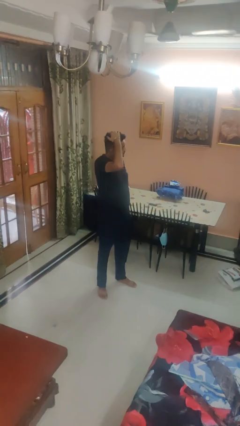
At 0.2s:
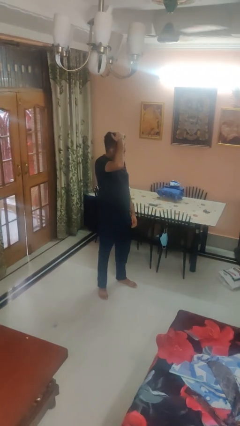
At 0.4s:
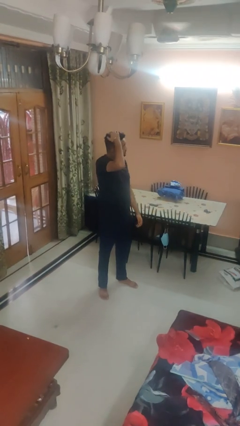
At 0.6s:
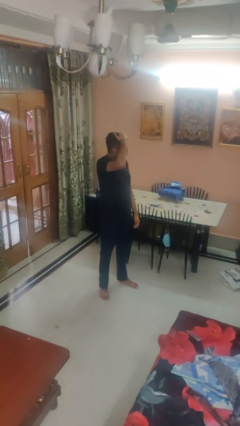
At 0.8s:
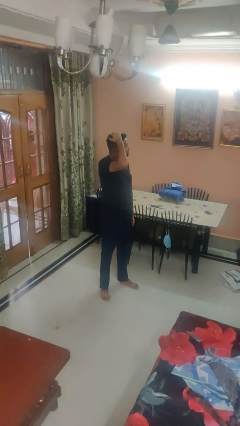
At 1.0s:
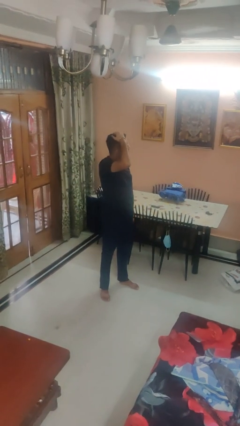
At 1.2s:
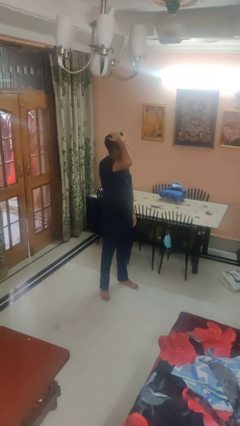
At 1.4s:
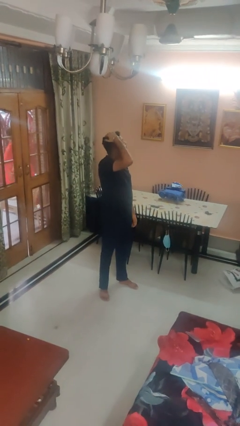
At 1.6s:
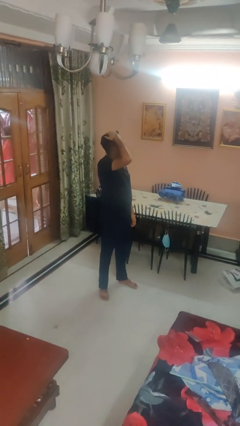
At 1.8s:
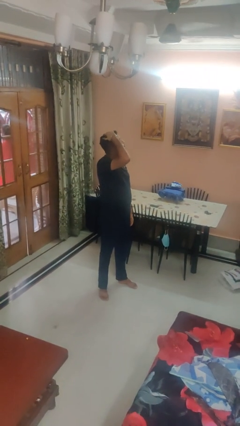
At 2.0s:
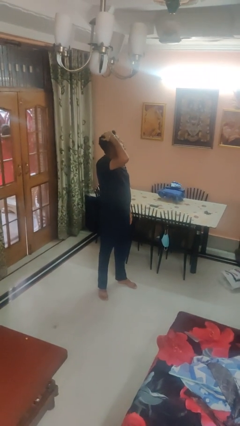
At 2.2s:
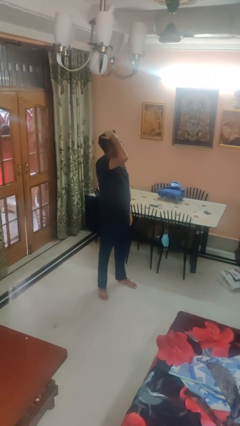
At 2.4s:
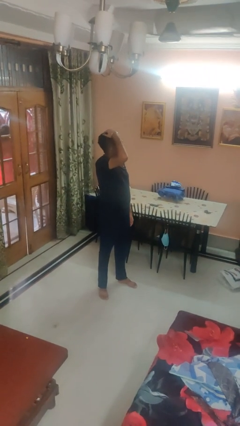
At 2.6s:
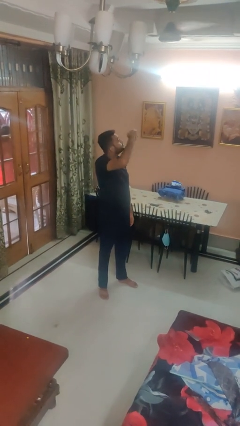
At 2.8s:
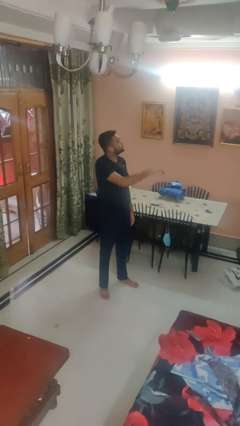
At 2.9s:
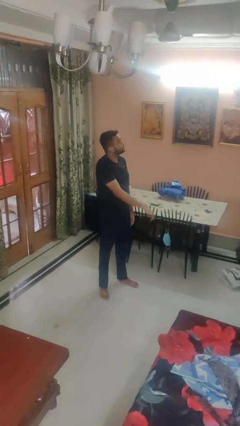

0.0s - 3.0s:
person pats head

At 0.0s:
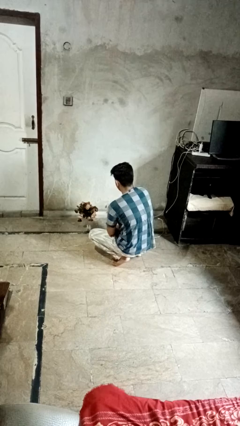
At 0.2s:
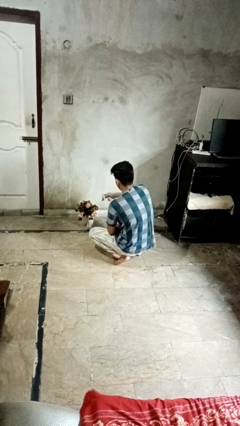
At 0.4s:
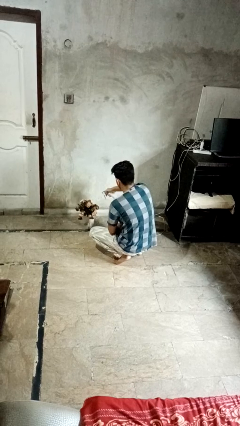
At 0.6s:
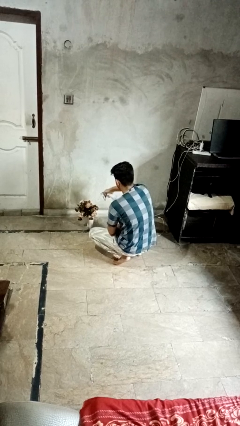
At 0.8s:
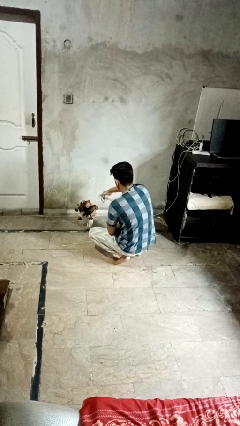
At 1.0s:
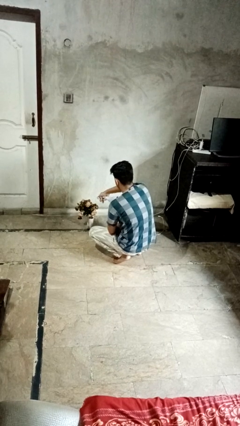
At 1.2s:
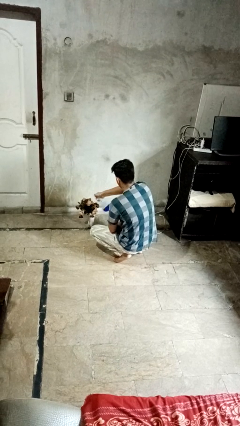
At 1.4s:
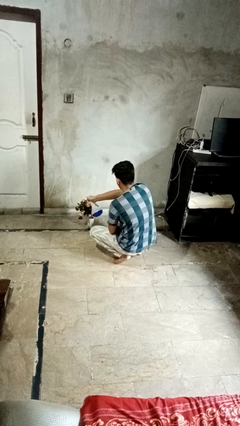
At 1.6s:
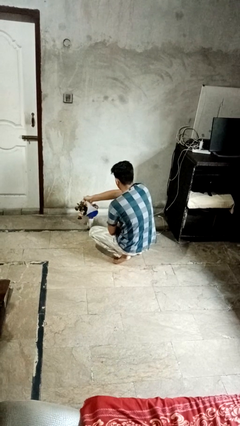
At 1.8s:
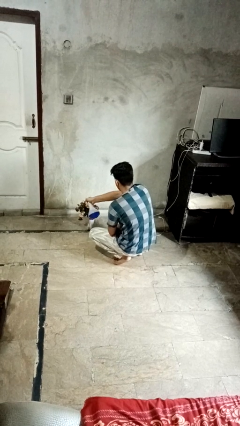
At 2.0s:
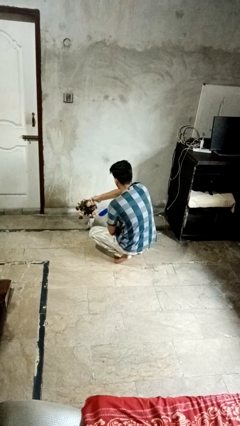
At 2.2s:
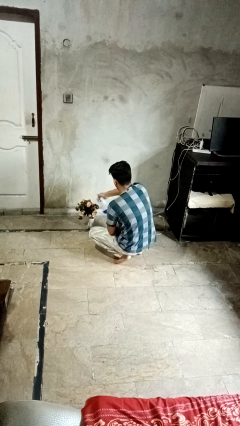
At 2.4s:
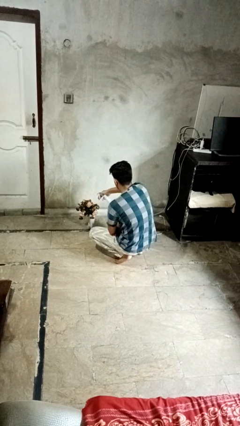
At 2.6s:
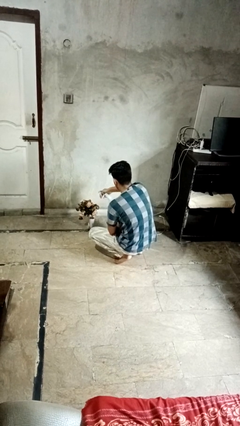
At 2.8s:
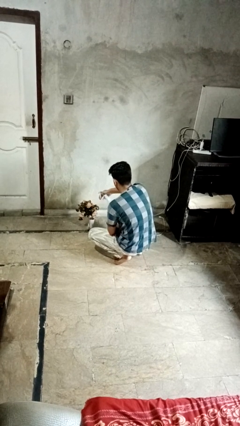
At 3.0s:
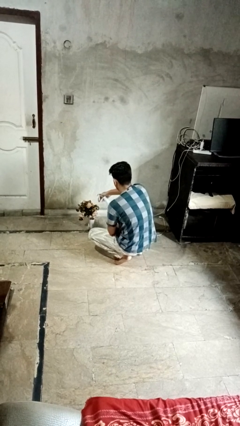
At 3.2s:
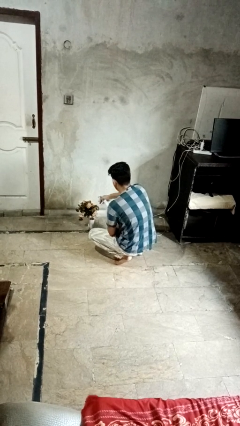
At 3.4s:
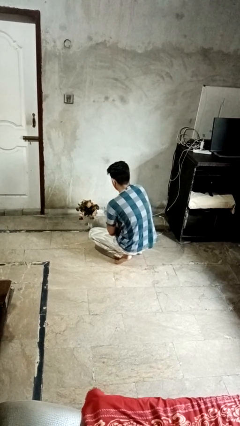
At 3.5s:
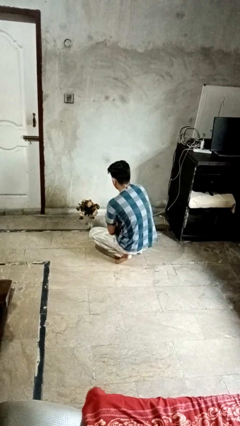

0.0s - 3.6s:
person waters houseplant

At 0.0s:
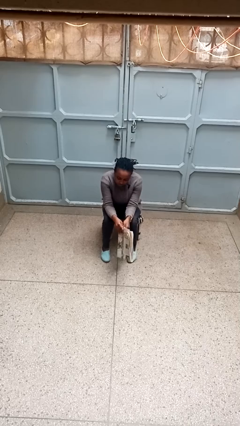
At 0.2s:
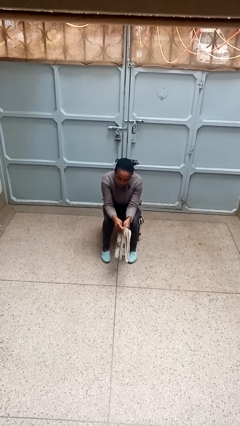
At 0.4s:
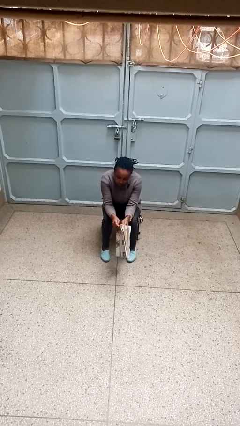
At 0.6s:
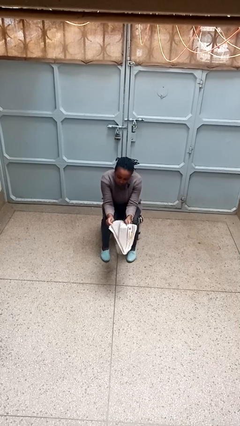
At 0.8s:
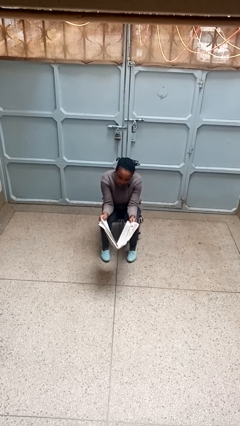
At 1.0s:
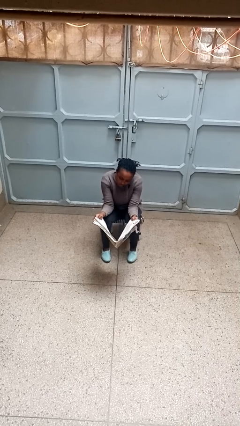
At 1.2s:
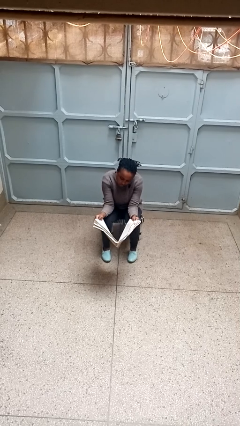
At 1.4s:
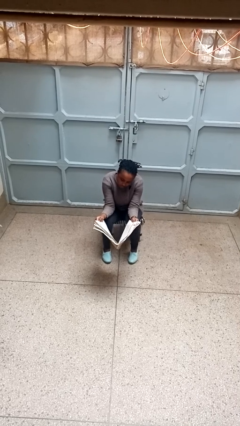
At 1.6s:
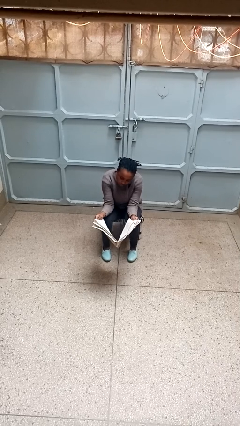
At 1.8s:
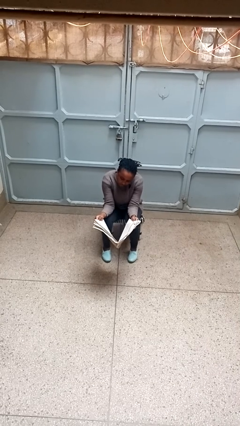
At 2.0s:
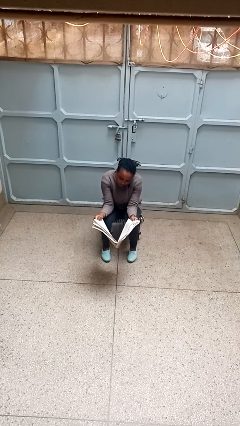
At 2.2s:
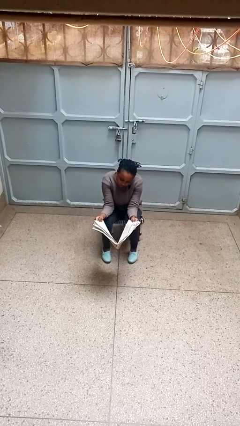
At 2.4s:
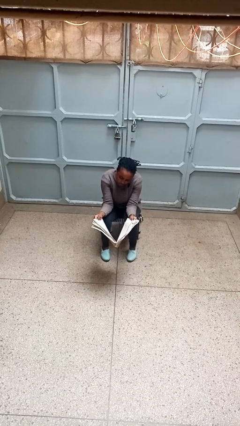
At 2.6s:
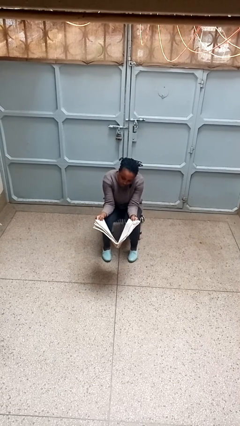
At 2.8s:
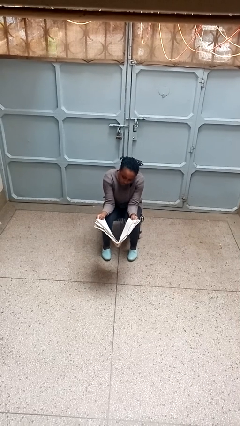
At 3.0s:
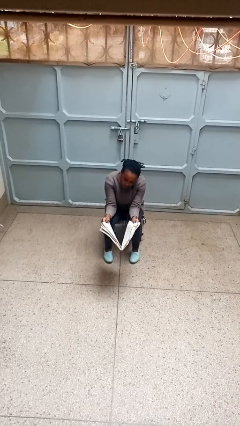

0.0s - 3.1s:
person reads newspaper

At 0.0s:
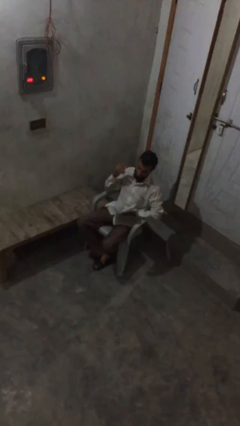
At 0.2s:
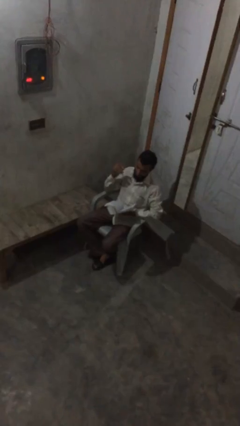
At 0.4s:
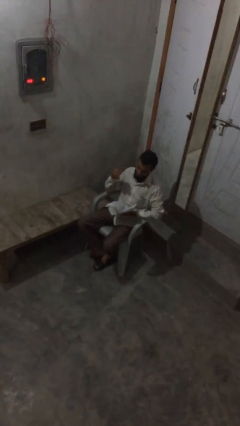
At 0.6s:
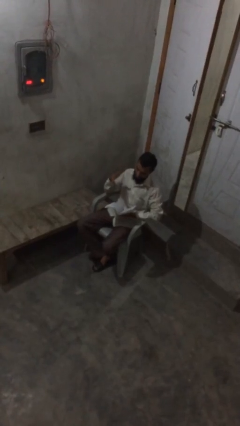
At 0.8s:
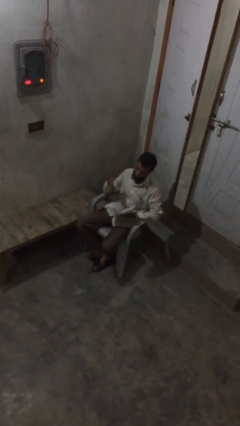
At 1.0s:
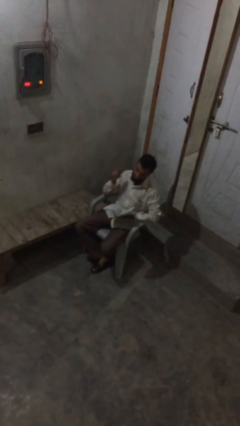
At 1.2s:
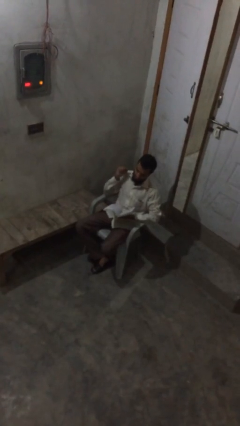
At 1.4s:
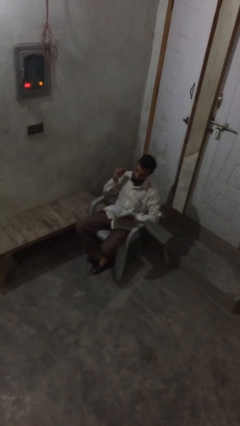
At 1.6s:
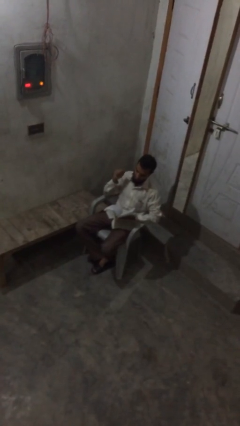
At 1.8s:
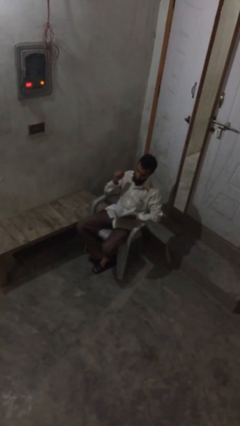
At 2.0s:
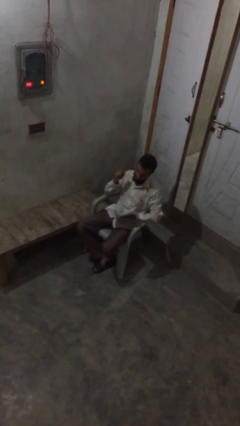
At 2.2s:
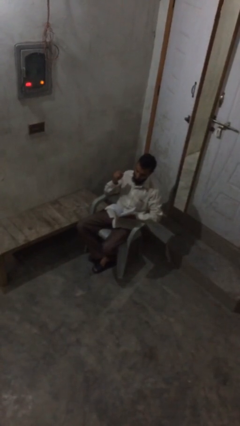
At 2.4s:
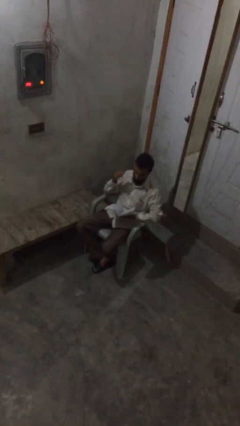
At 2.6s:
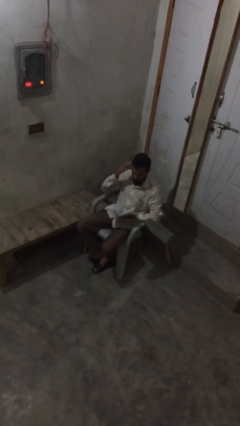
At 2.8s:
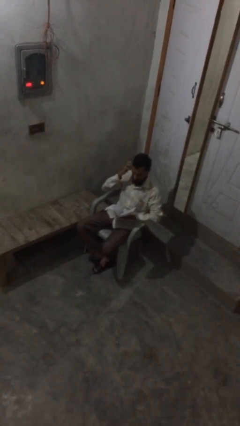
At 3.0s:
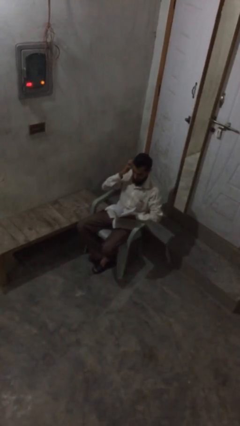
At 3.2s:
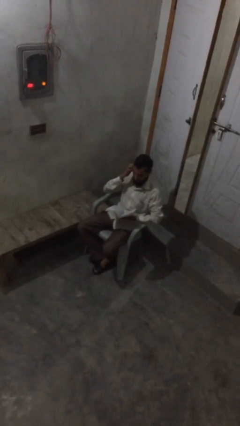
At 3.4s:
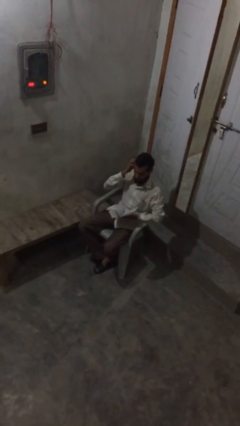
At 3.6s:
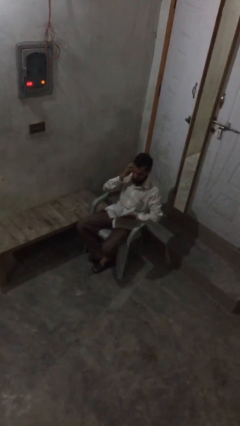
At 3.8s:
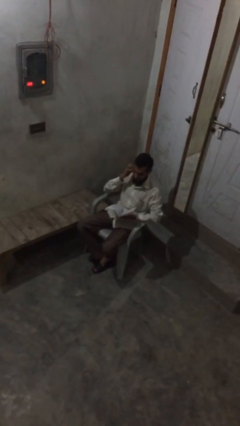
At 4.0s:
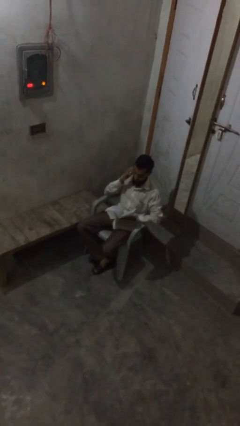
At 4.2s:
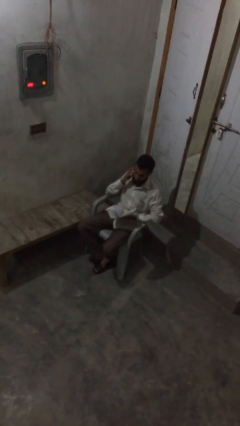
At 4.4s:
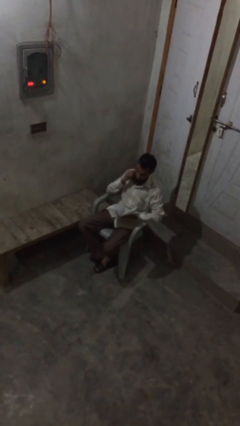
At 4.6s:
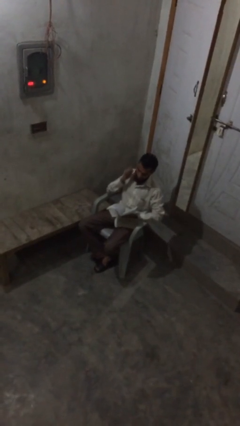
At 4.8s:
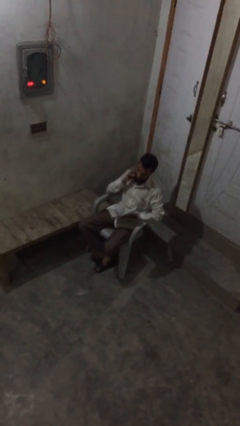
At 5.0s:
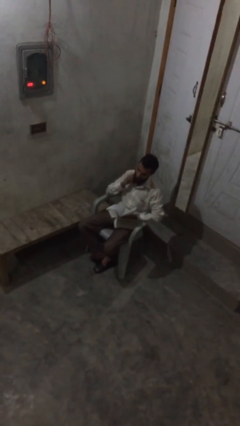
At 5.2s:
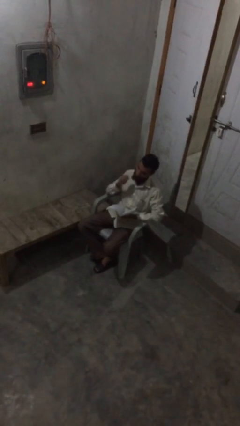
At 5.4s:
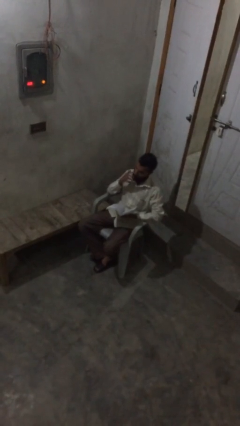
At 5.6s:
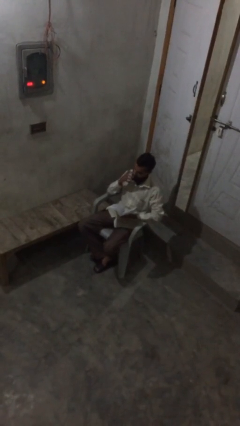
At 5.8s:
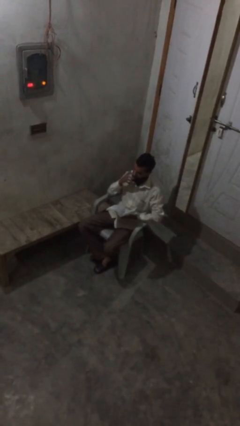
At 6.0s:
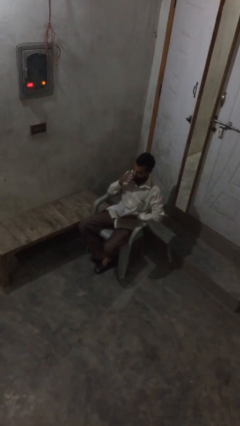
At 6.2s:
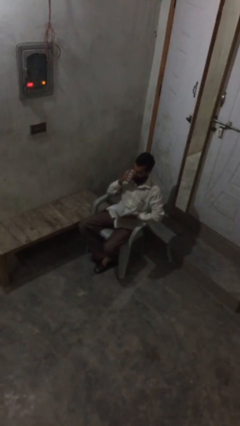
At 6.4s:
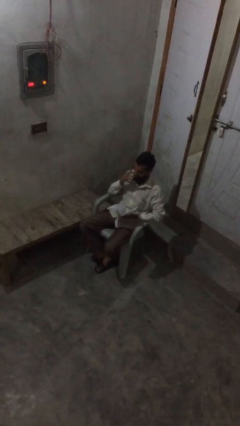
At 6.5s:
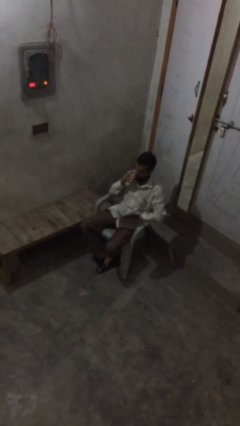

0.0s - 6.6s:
person reads document

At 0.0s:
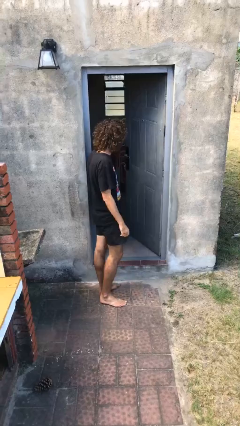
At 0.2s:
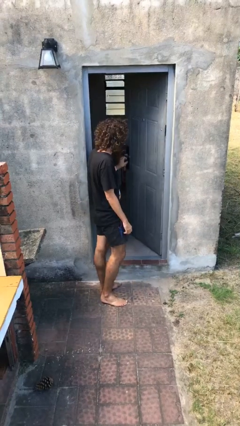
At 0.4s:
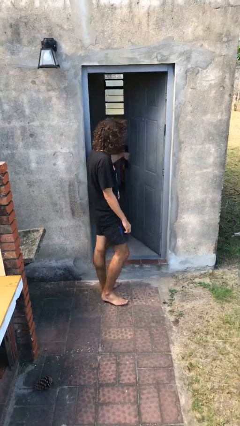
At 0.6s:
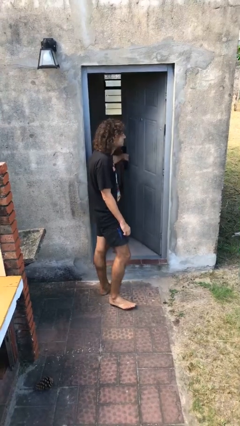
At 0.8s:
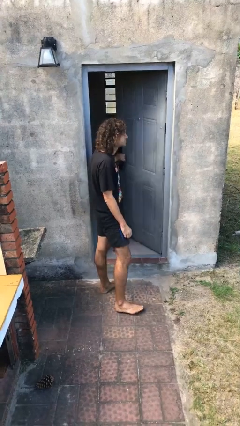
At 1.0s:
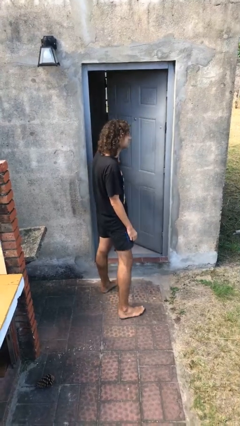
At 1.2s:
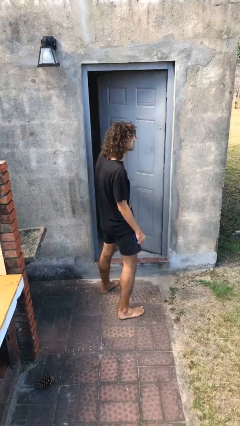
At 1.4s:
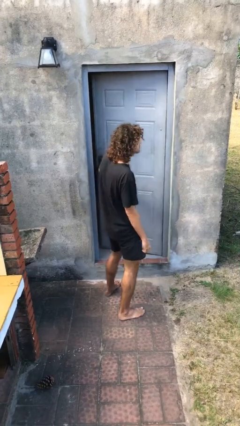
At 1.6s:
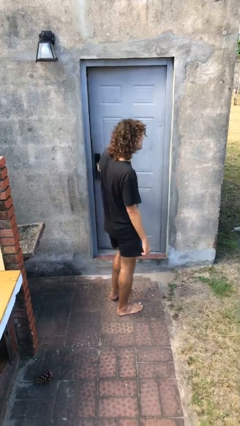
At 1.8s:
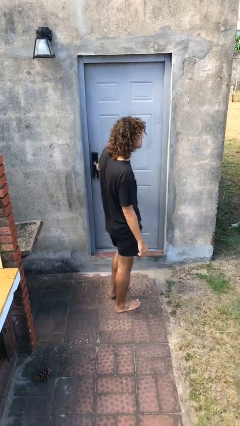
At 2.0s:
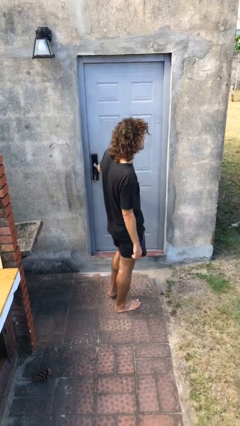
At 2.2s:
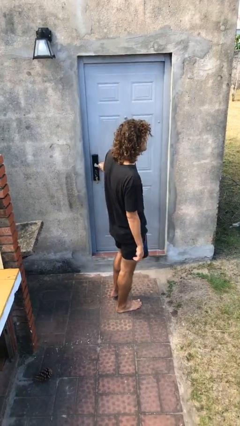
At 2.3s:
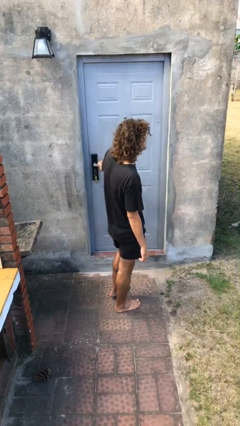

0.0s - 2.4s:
person closes facility door
